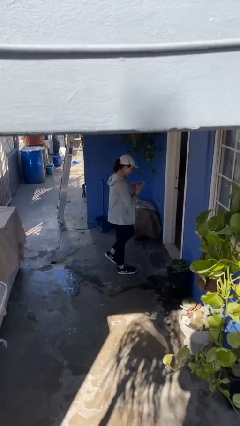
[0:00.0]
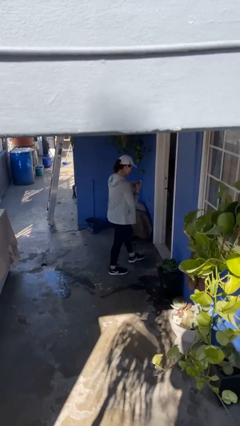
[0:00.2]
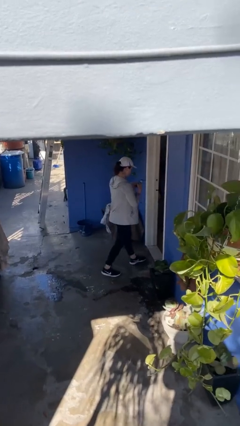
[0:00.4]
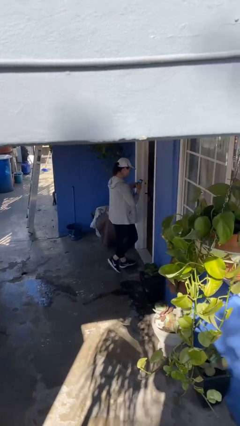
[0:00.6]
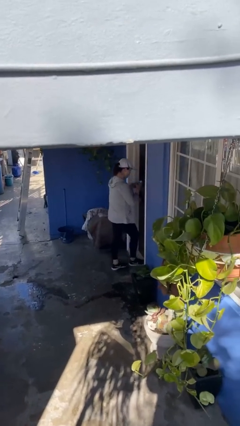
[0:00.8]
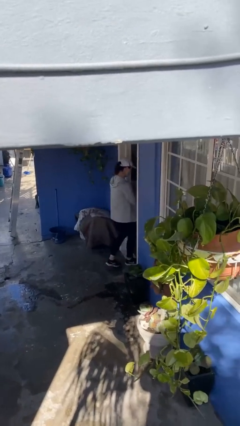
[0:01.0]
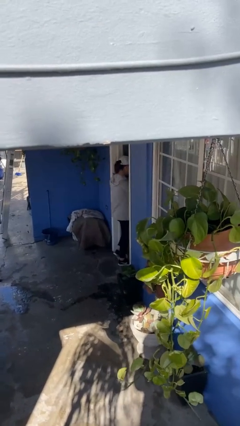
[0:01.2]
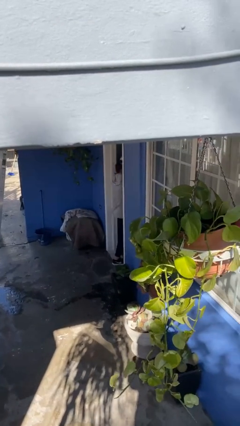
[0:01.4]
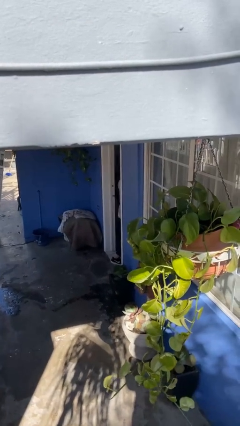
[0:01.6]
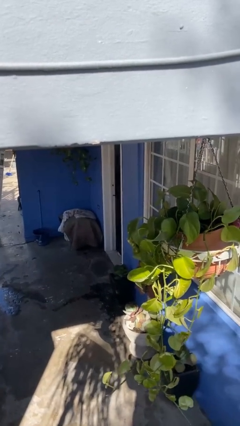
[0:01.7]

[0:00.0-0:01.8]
person exits scene through structure

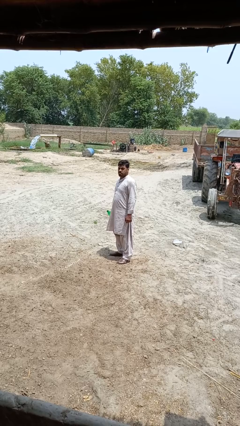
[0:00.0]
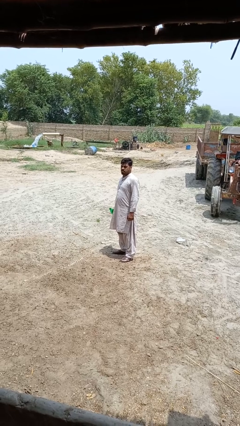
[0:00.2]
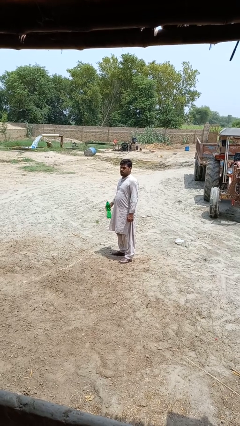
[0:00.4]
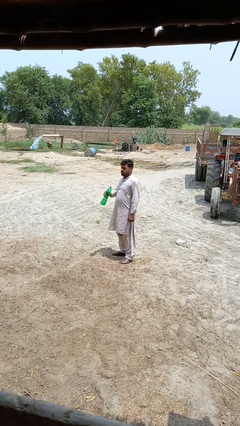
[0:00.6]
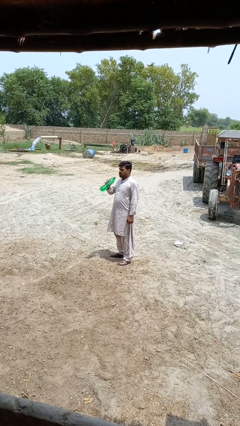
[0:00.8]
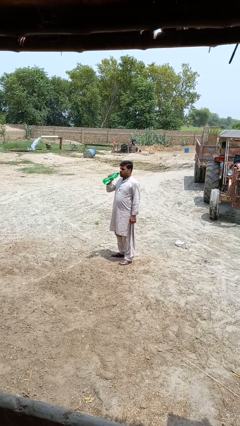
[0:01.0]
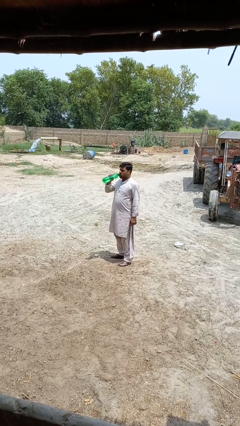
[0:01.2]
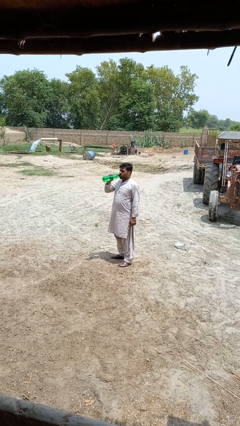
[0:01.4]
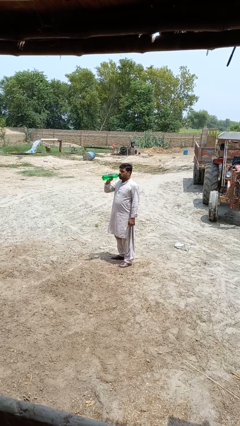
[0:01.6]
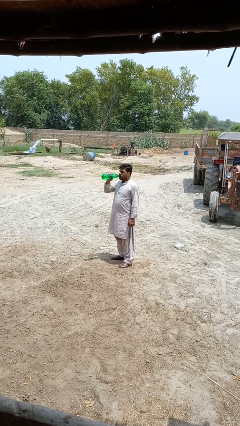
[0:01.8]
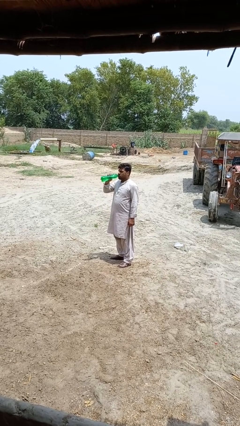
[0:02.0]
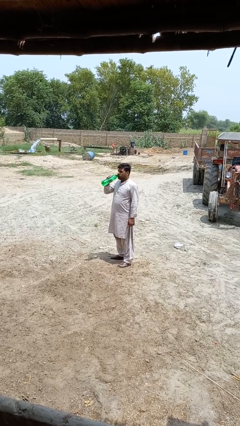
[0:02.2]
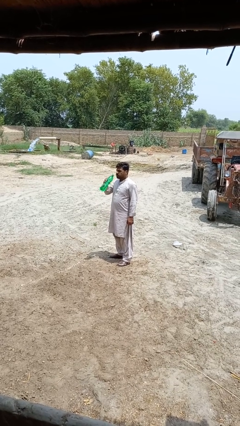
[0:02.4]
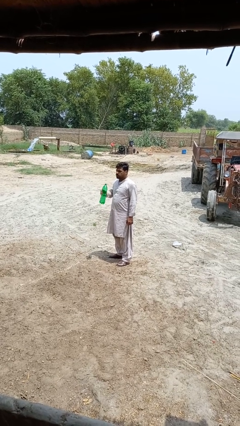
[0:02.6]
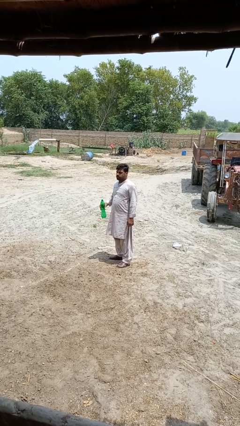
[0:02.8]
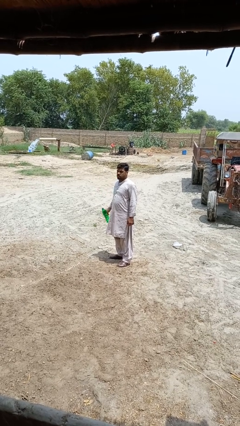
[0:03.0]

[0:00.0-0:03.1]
person drinks from bottle

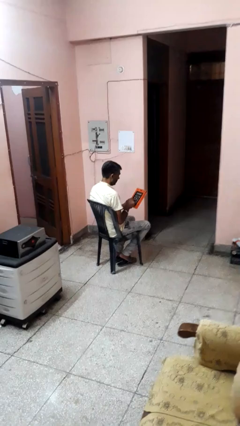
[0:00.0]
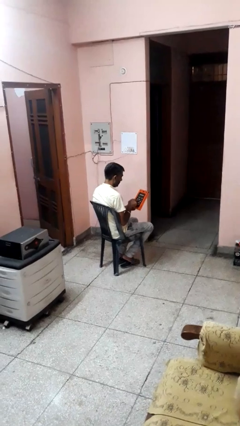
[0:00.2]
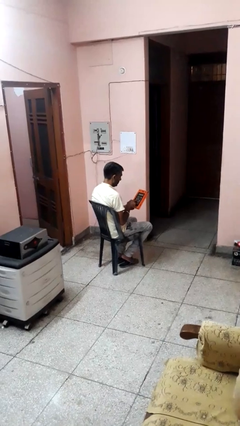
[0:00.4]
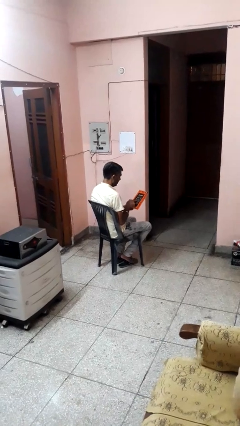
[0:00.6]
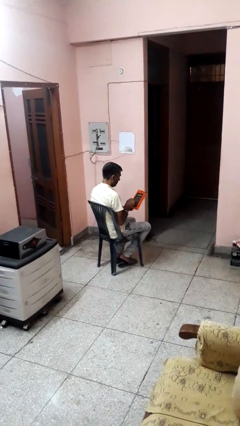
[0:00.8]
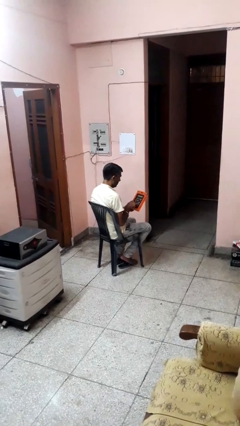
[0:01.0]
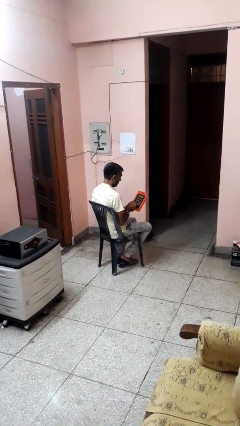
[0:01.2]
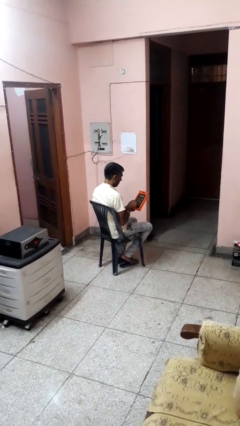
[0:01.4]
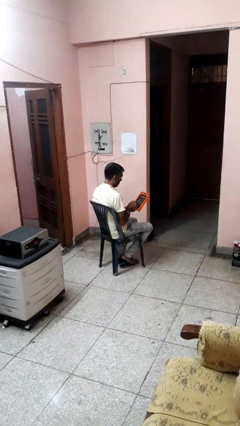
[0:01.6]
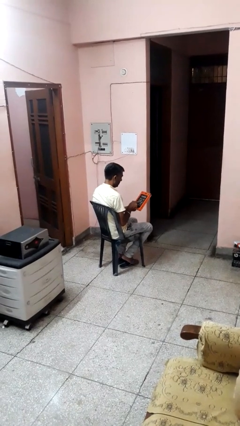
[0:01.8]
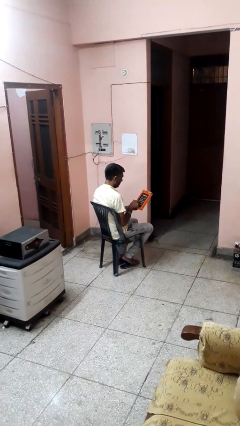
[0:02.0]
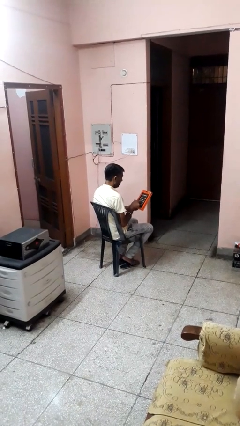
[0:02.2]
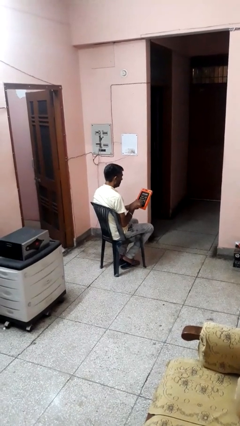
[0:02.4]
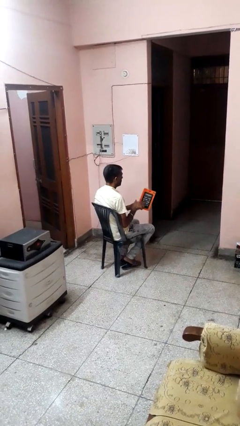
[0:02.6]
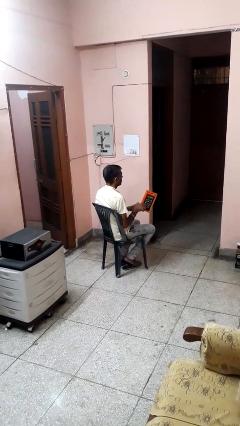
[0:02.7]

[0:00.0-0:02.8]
person taps object with finger

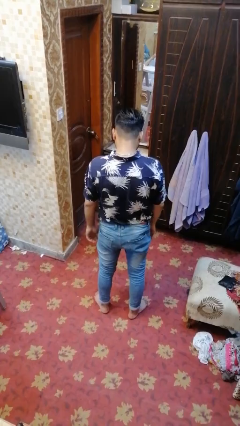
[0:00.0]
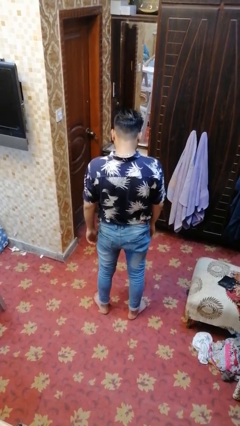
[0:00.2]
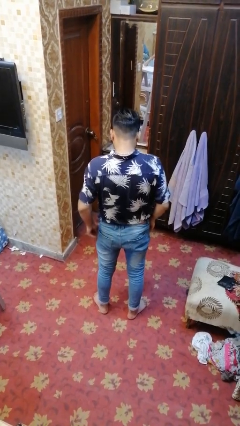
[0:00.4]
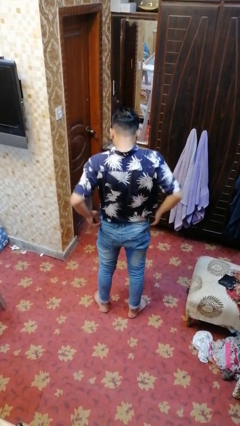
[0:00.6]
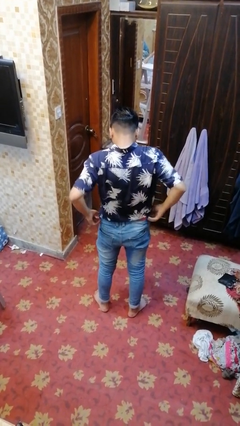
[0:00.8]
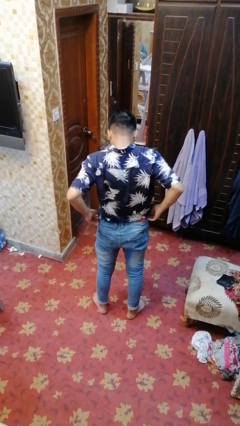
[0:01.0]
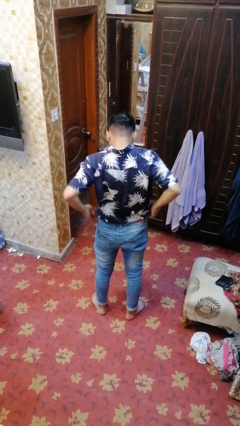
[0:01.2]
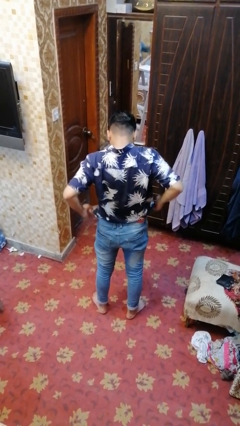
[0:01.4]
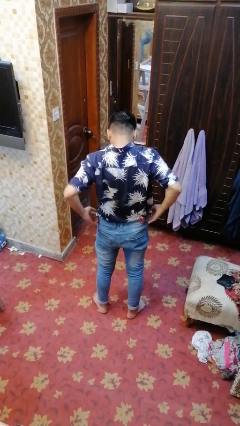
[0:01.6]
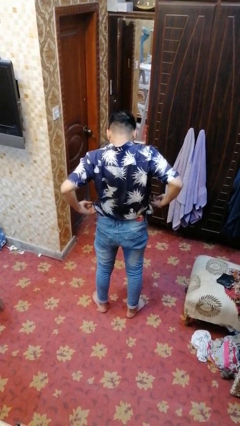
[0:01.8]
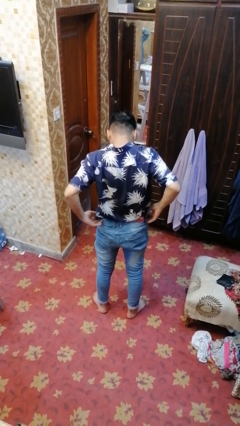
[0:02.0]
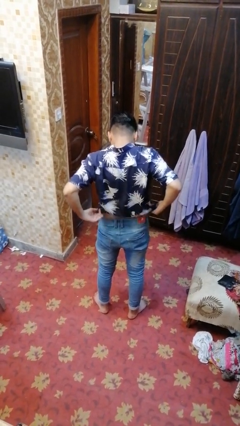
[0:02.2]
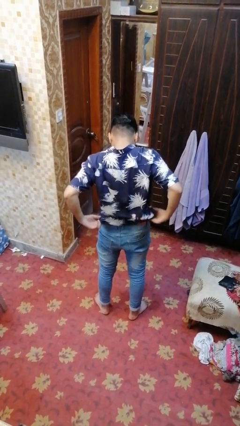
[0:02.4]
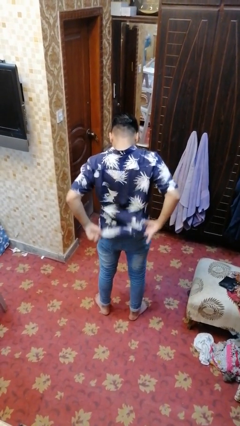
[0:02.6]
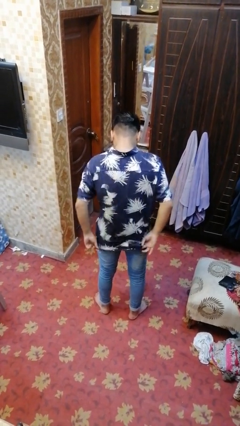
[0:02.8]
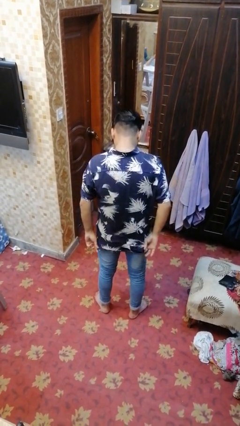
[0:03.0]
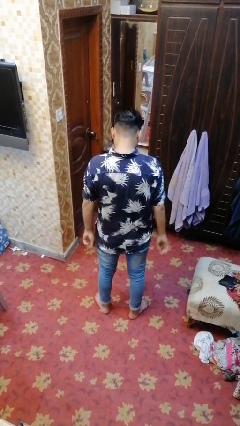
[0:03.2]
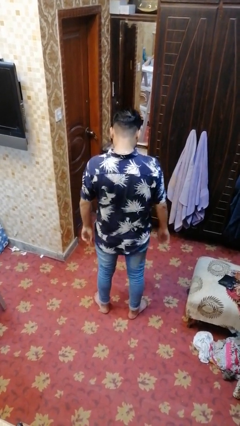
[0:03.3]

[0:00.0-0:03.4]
person untucks shirt

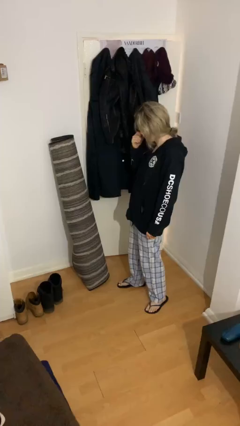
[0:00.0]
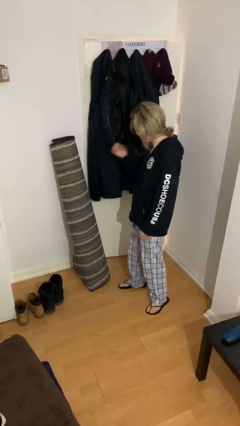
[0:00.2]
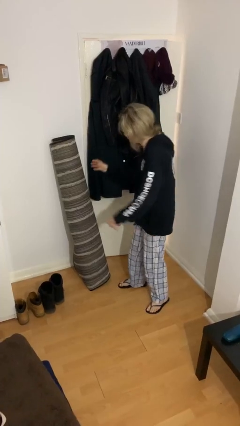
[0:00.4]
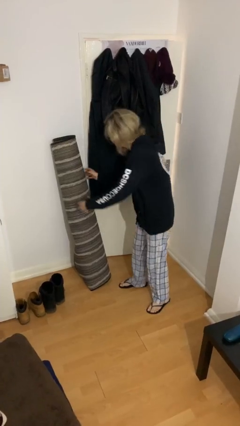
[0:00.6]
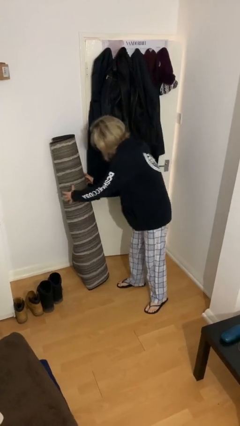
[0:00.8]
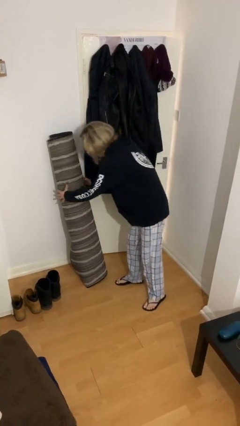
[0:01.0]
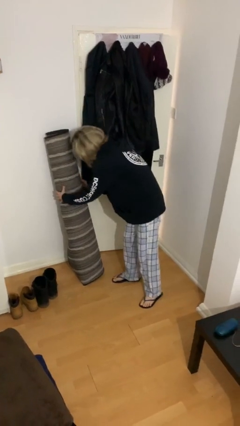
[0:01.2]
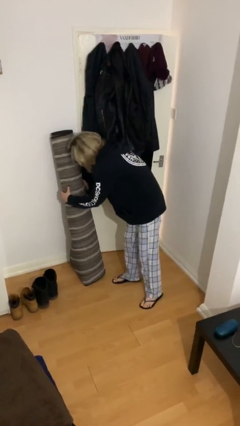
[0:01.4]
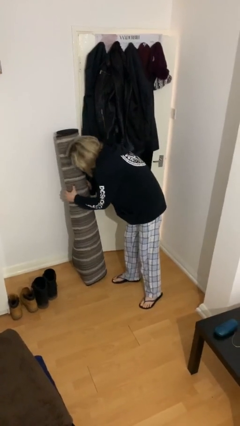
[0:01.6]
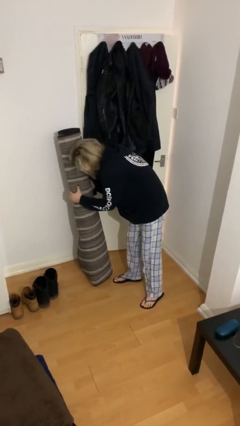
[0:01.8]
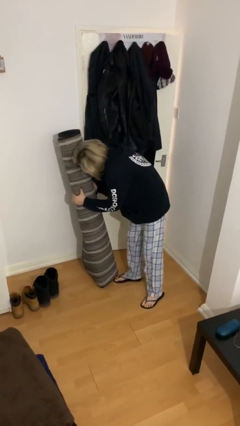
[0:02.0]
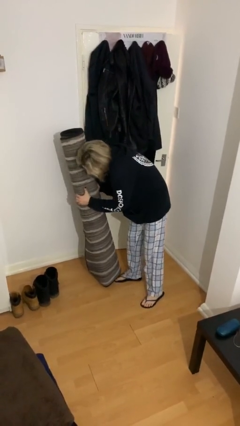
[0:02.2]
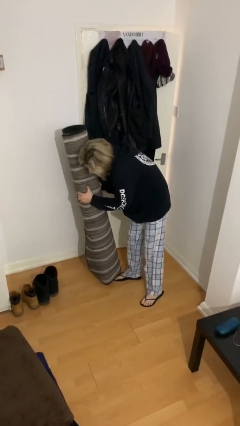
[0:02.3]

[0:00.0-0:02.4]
person picks up object from floor

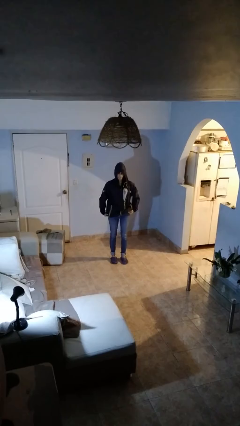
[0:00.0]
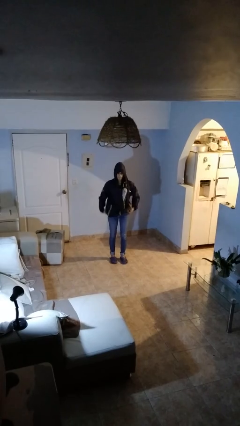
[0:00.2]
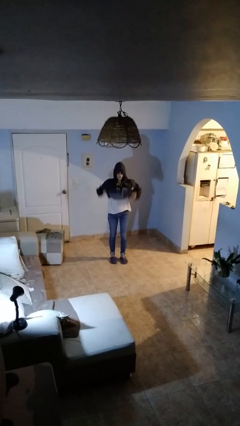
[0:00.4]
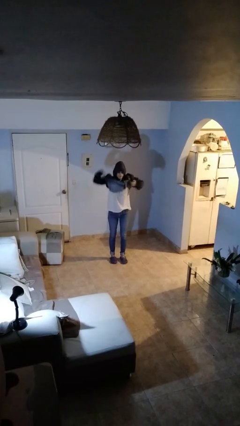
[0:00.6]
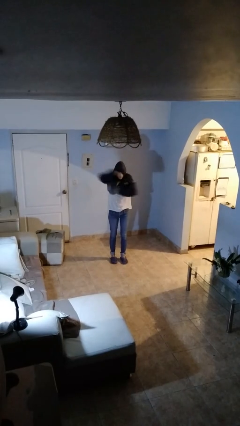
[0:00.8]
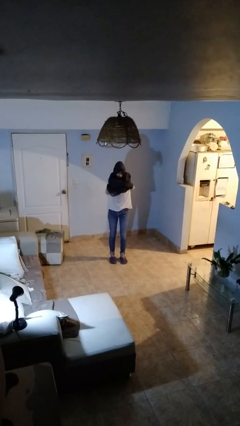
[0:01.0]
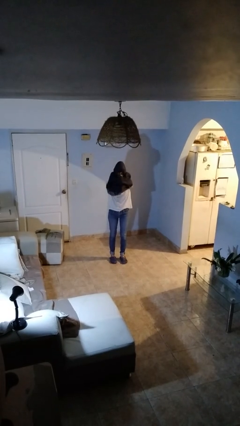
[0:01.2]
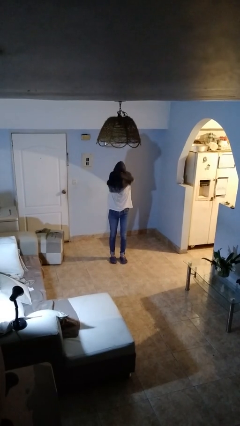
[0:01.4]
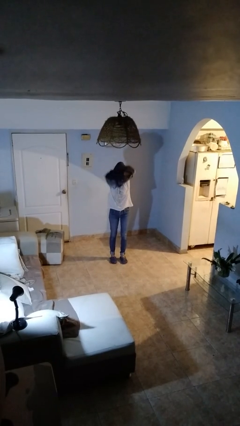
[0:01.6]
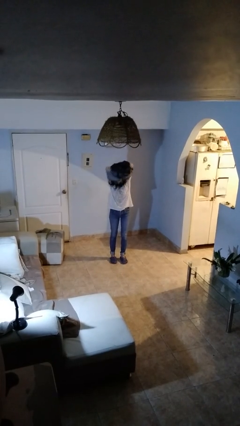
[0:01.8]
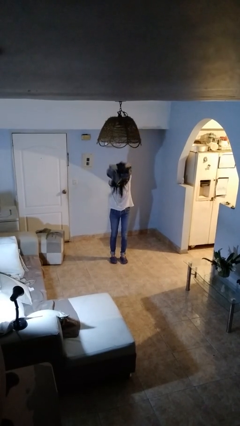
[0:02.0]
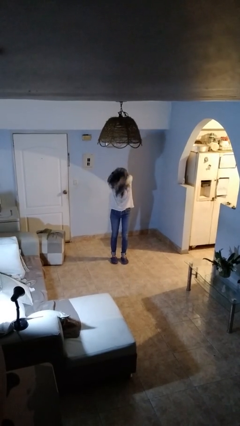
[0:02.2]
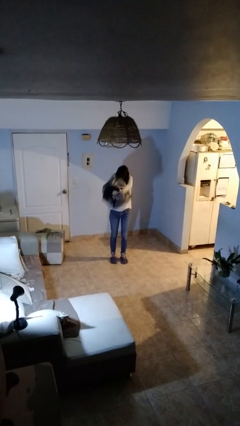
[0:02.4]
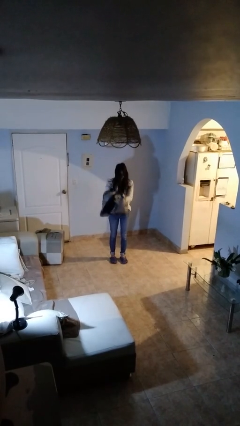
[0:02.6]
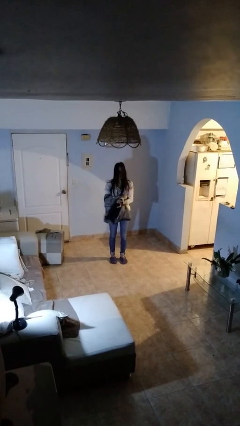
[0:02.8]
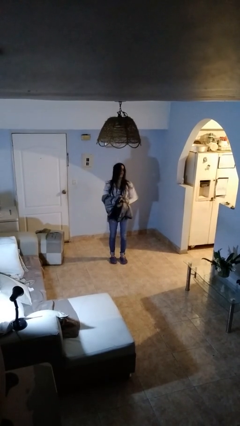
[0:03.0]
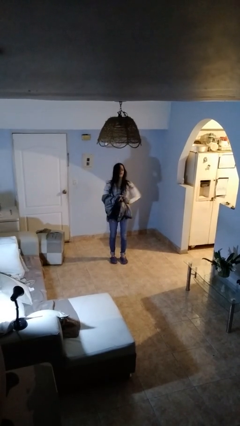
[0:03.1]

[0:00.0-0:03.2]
person takes off hoodie

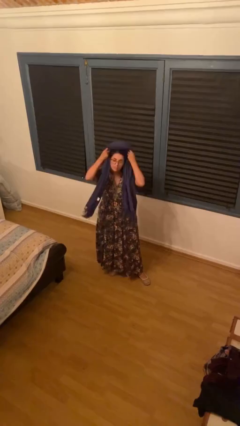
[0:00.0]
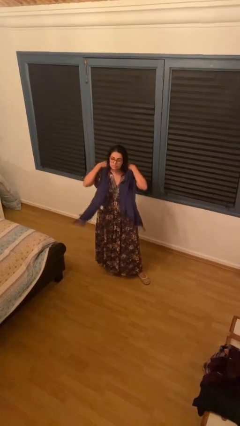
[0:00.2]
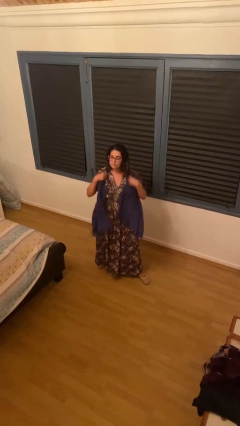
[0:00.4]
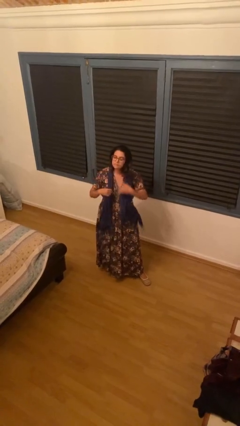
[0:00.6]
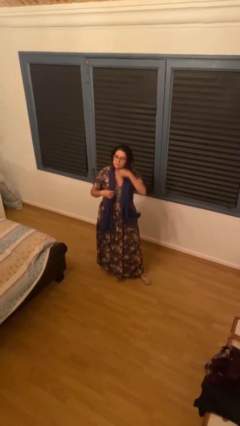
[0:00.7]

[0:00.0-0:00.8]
person puts on scarf
